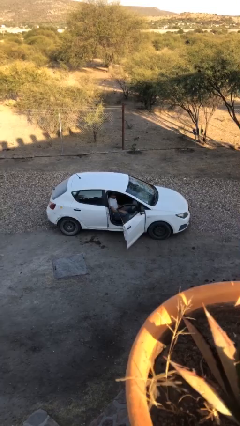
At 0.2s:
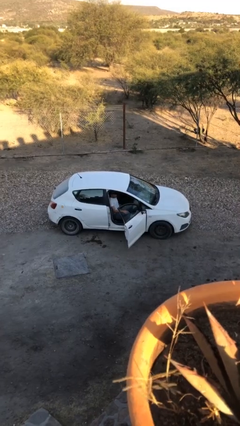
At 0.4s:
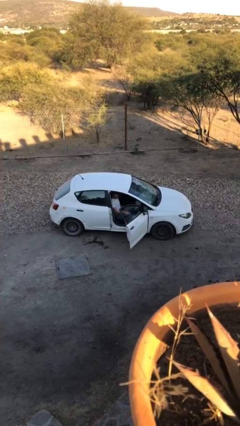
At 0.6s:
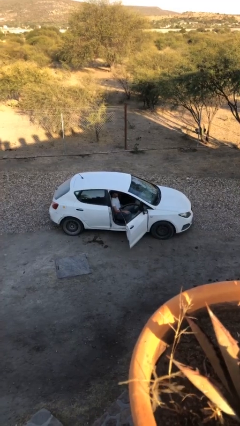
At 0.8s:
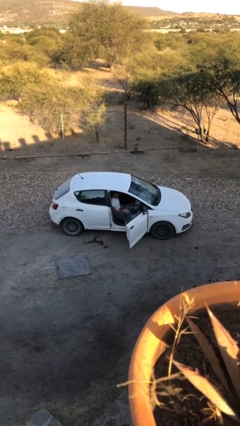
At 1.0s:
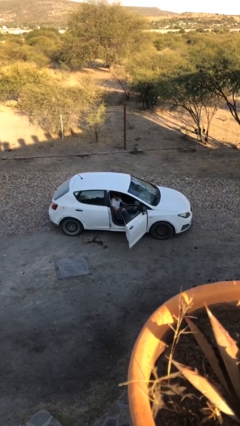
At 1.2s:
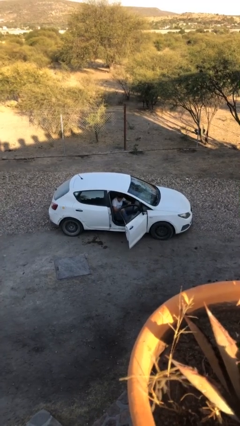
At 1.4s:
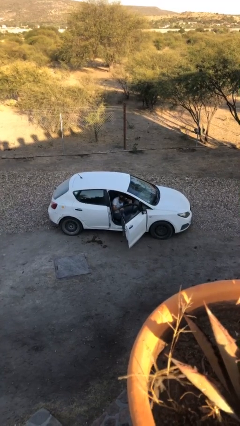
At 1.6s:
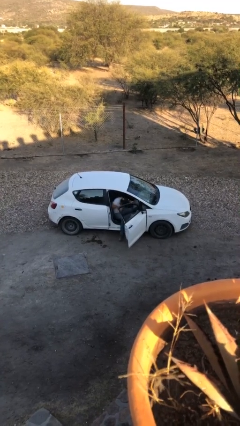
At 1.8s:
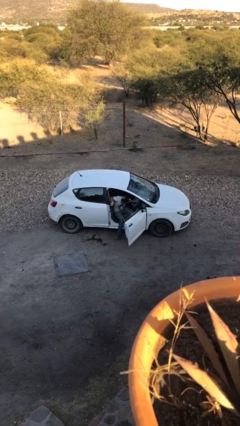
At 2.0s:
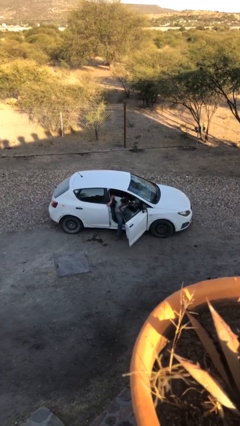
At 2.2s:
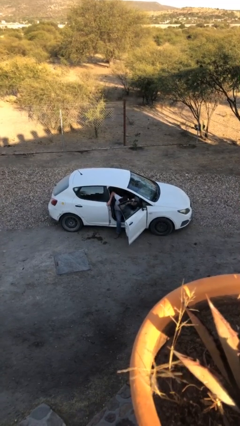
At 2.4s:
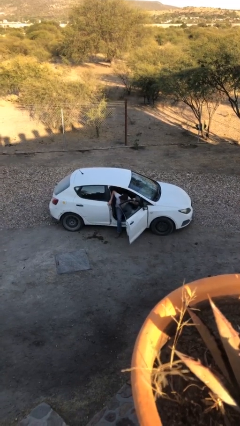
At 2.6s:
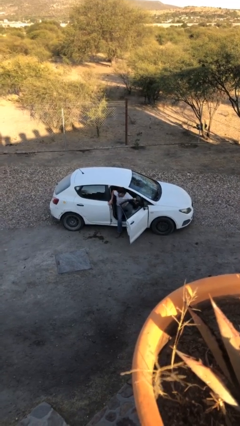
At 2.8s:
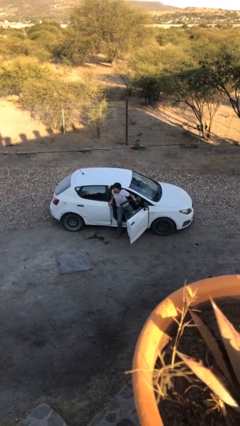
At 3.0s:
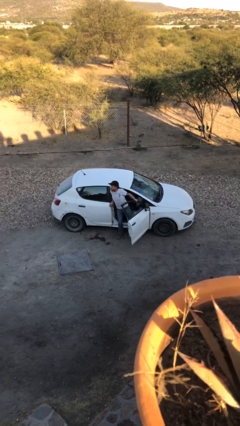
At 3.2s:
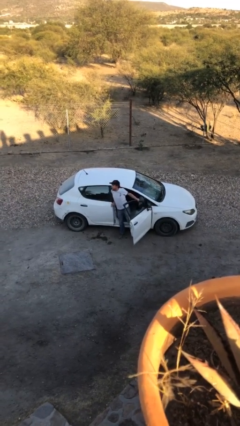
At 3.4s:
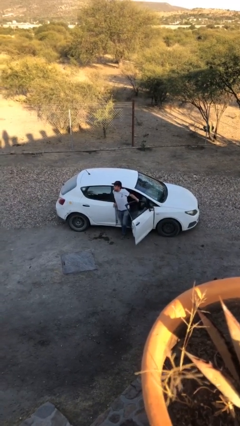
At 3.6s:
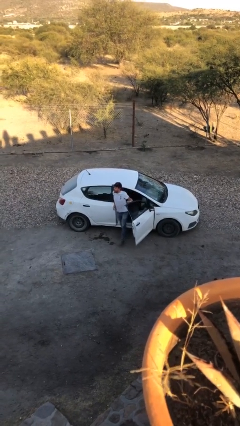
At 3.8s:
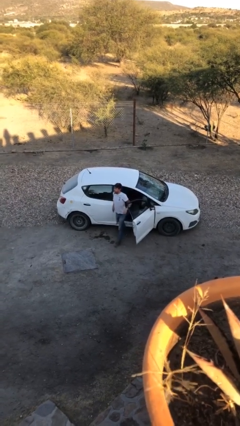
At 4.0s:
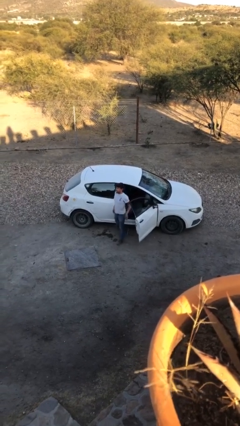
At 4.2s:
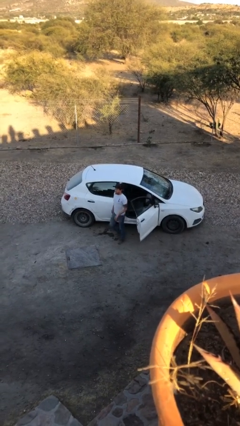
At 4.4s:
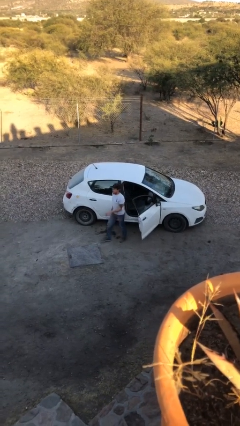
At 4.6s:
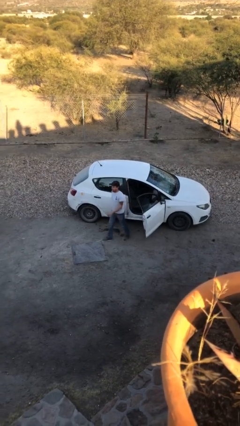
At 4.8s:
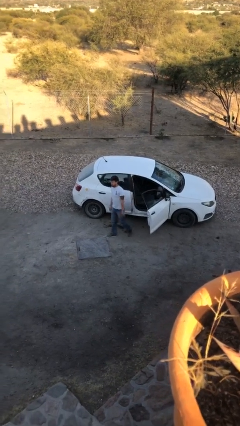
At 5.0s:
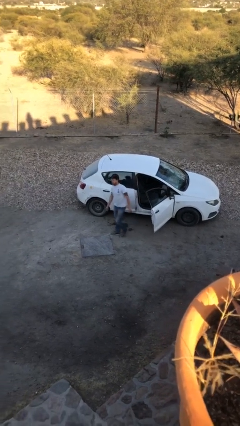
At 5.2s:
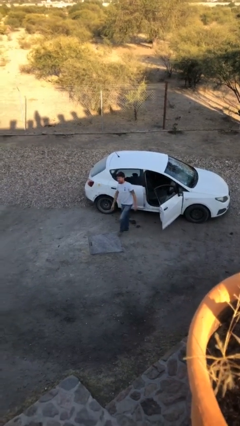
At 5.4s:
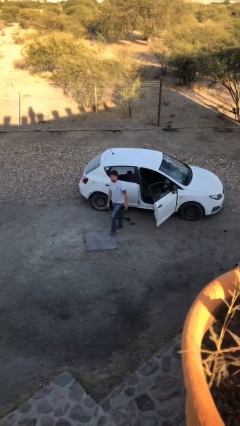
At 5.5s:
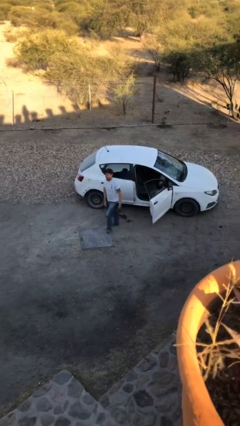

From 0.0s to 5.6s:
person exits car

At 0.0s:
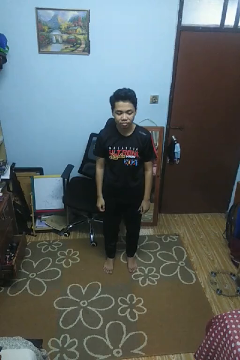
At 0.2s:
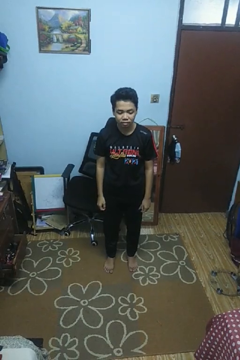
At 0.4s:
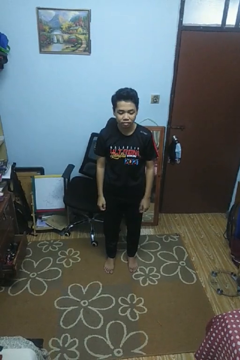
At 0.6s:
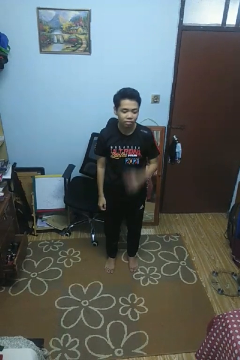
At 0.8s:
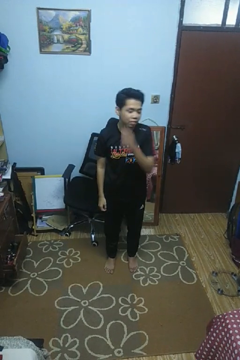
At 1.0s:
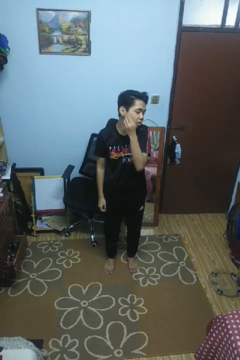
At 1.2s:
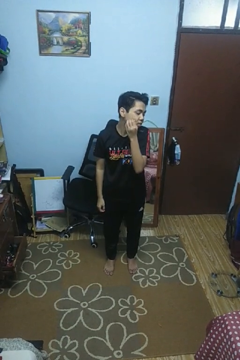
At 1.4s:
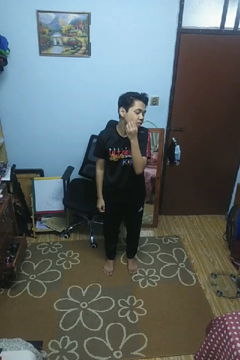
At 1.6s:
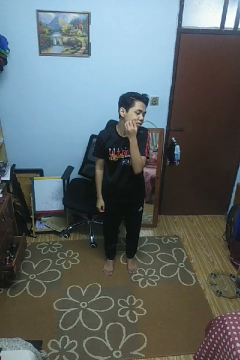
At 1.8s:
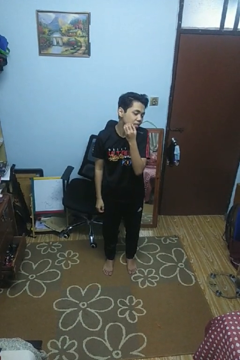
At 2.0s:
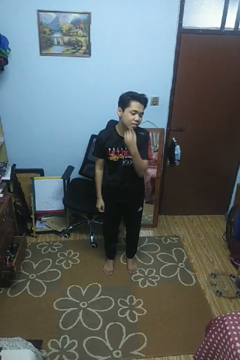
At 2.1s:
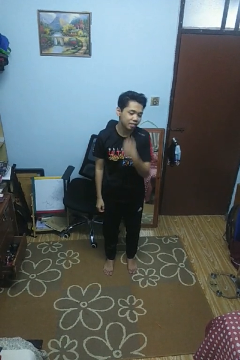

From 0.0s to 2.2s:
person scratches face

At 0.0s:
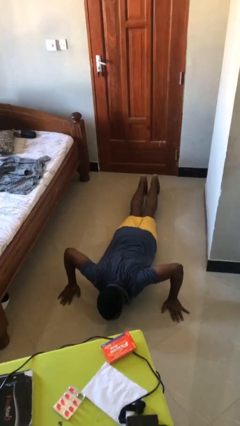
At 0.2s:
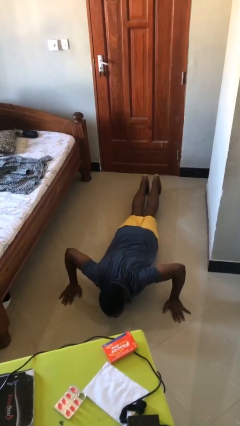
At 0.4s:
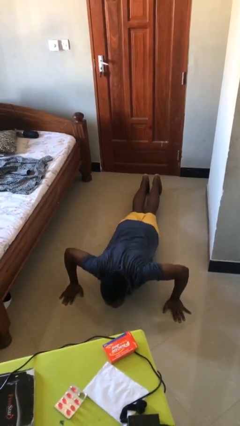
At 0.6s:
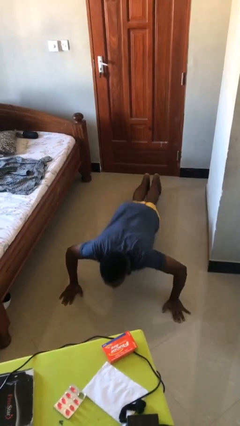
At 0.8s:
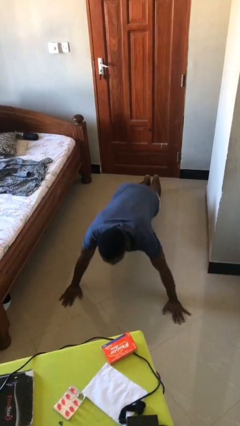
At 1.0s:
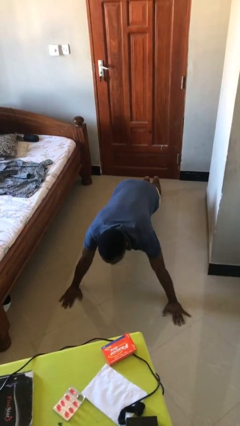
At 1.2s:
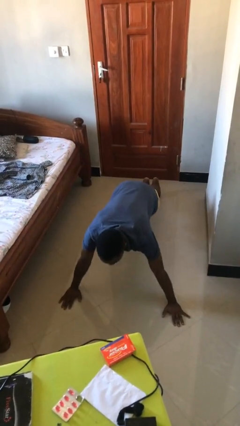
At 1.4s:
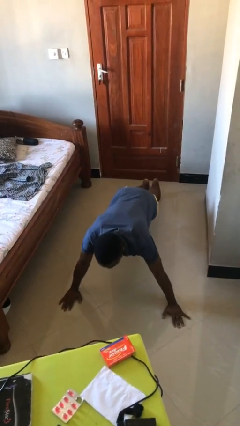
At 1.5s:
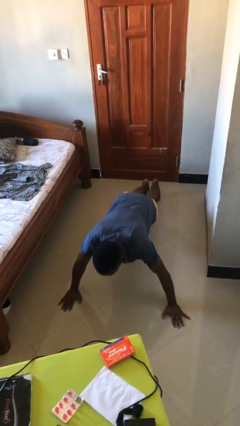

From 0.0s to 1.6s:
person exercises with pushup

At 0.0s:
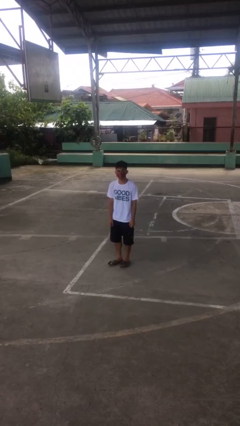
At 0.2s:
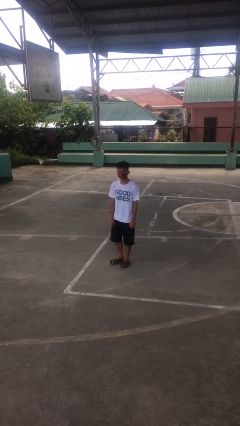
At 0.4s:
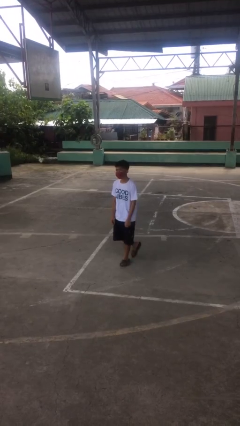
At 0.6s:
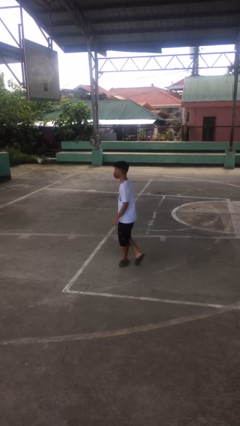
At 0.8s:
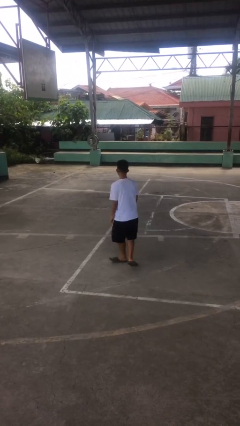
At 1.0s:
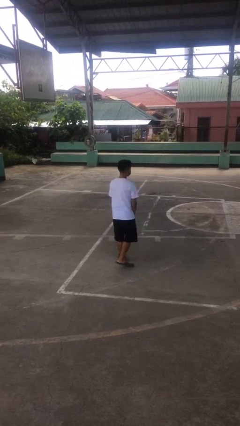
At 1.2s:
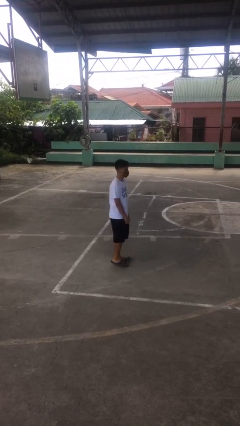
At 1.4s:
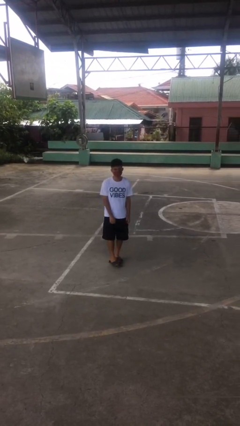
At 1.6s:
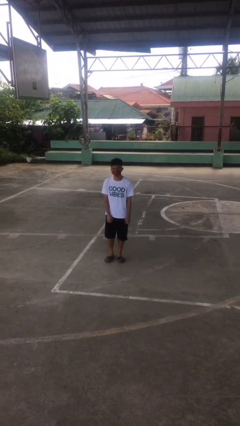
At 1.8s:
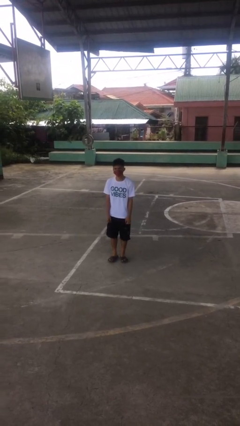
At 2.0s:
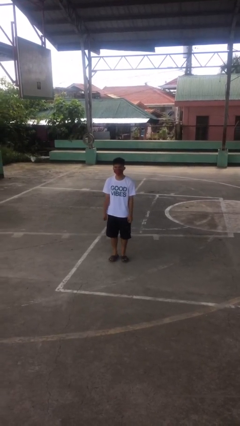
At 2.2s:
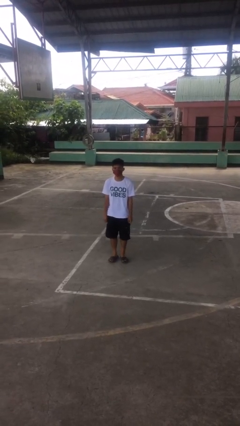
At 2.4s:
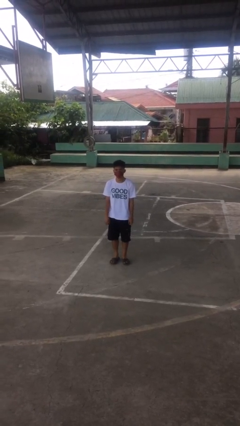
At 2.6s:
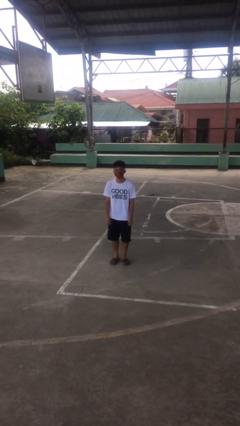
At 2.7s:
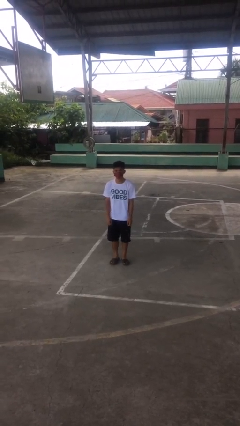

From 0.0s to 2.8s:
person twirls

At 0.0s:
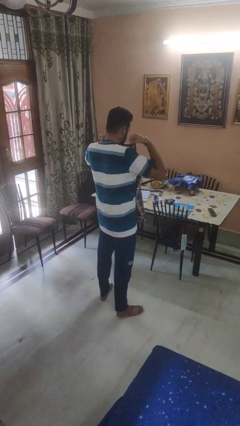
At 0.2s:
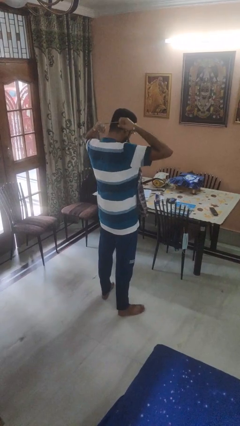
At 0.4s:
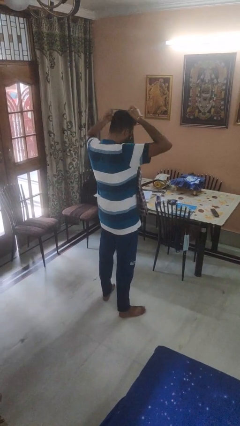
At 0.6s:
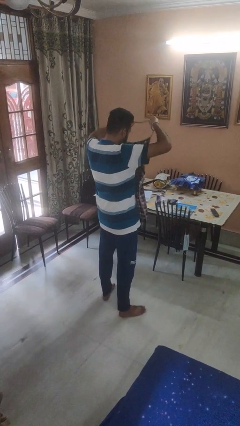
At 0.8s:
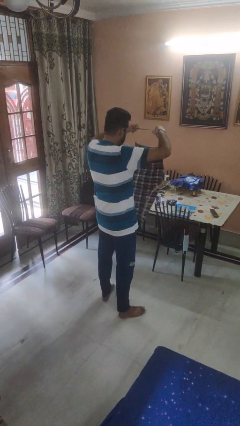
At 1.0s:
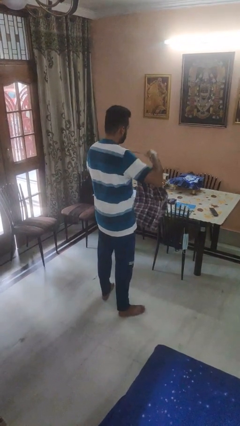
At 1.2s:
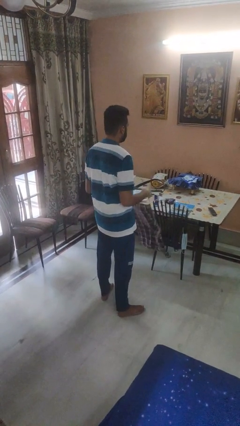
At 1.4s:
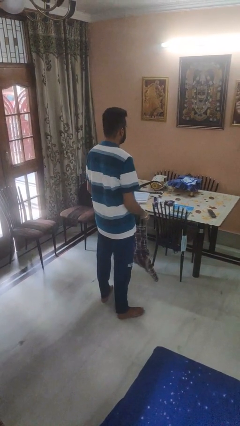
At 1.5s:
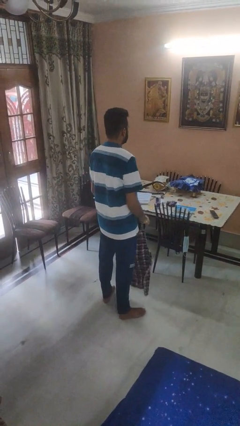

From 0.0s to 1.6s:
person takes off apron

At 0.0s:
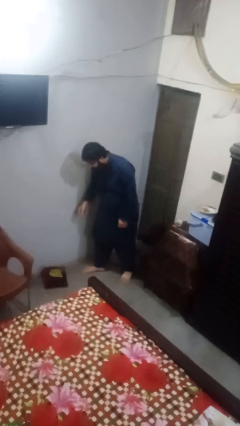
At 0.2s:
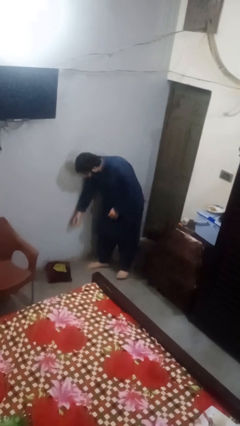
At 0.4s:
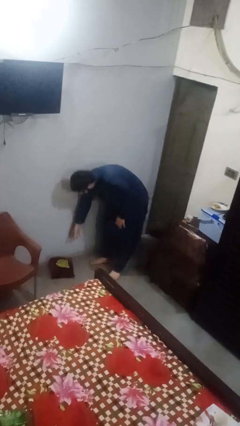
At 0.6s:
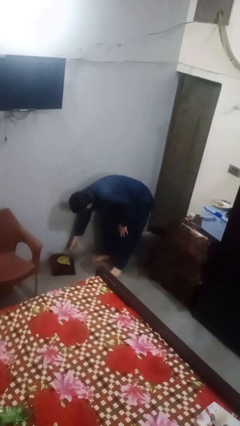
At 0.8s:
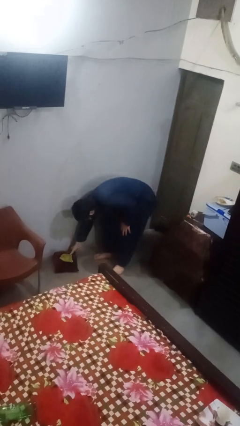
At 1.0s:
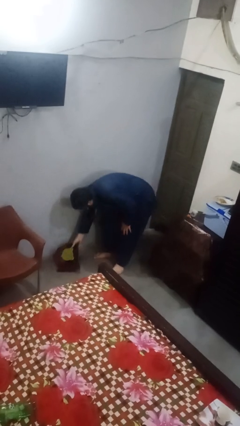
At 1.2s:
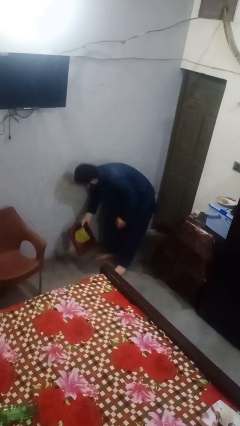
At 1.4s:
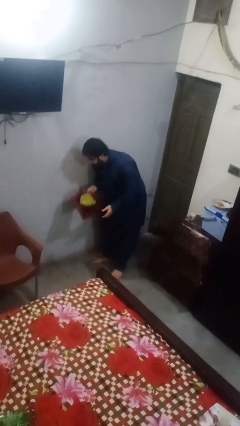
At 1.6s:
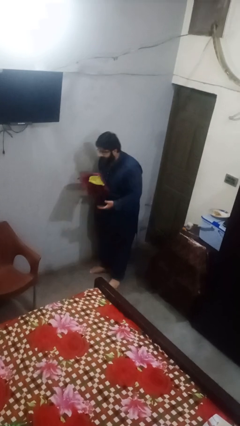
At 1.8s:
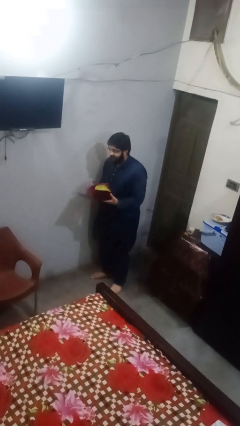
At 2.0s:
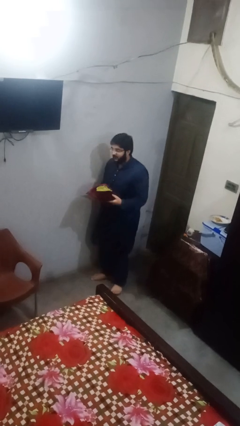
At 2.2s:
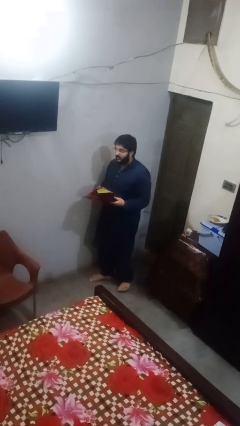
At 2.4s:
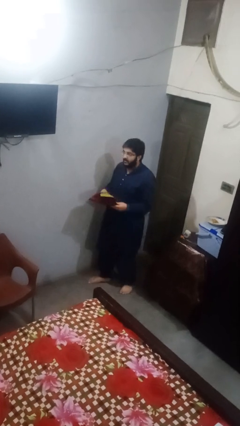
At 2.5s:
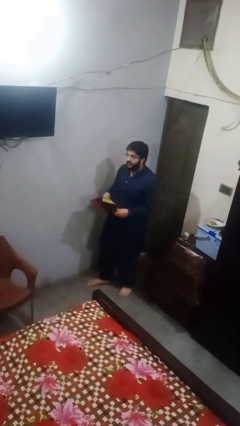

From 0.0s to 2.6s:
person picks up object from floor

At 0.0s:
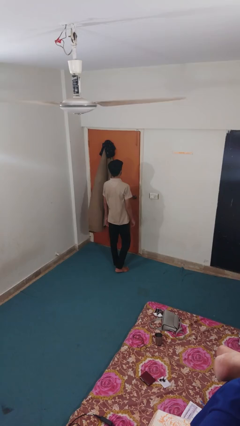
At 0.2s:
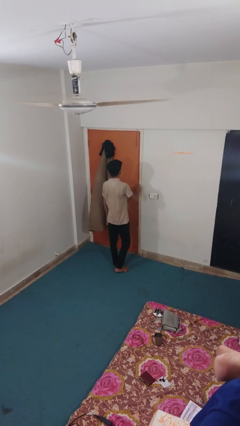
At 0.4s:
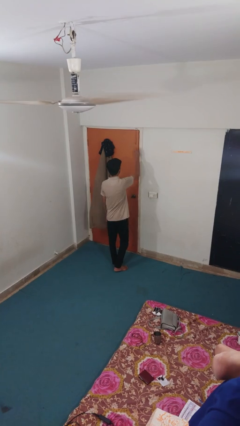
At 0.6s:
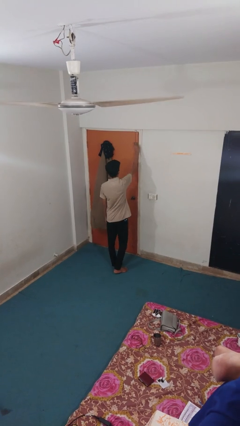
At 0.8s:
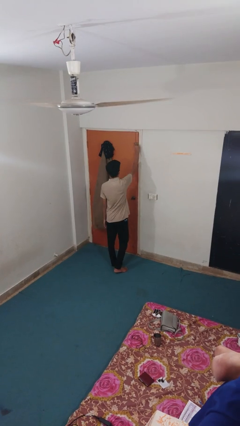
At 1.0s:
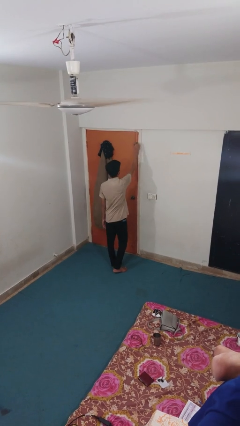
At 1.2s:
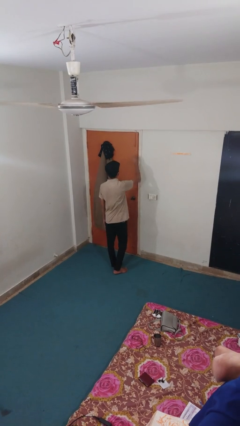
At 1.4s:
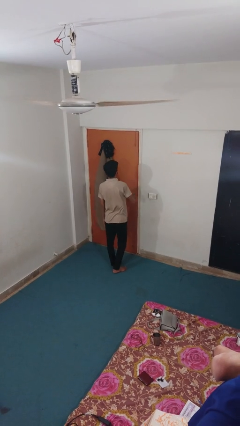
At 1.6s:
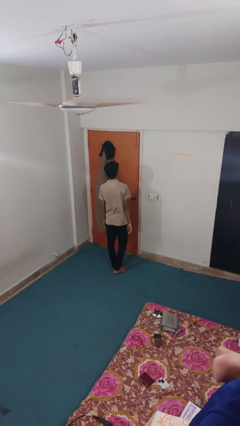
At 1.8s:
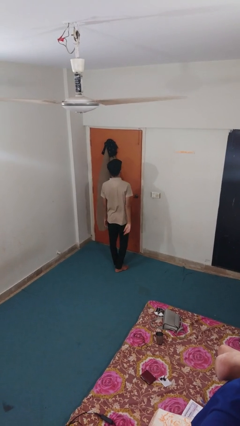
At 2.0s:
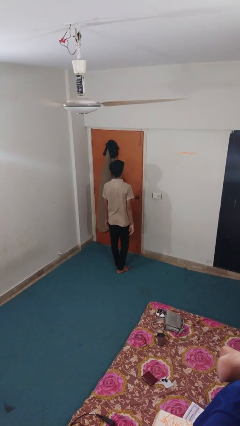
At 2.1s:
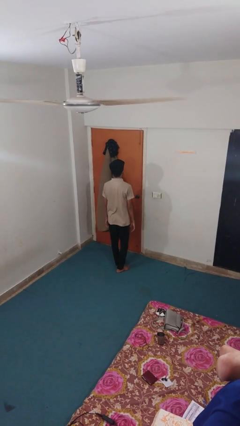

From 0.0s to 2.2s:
person locks door with keys
